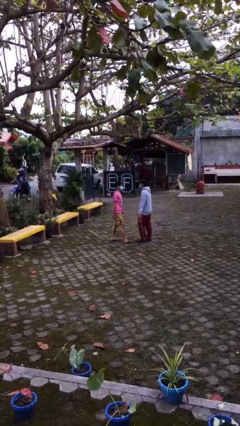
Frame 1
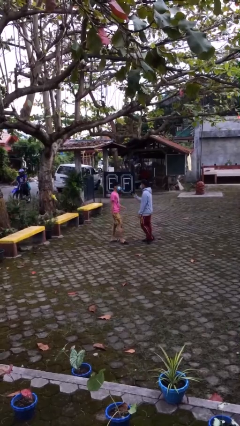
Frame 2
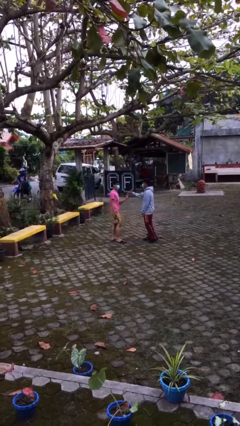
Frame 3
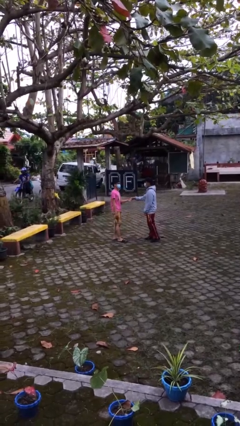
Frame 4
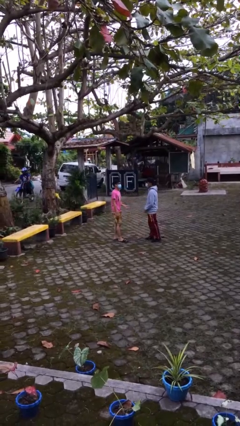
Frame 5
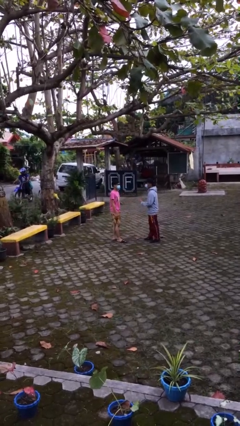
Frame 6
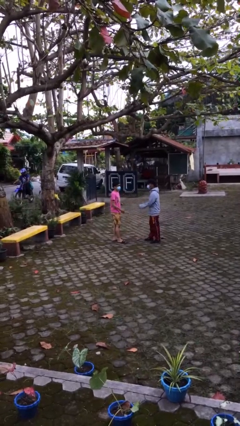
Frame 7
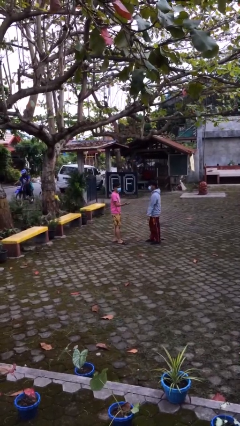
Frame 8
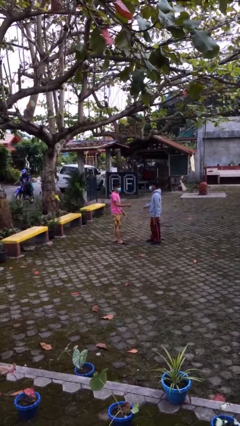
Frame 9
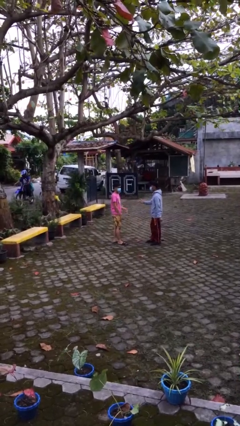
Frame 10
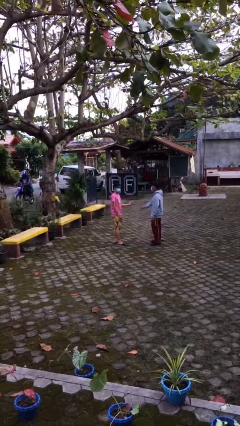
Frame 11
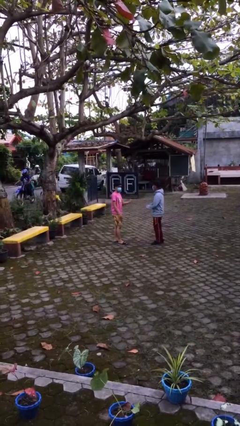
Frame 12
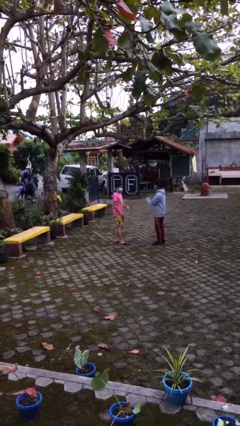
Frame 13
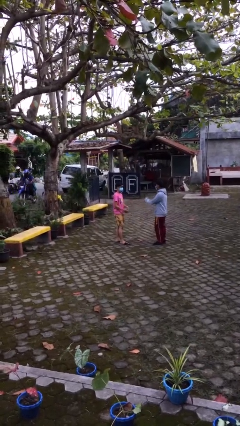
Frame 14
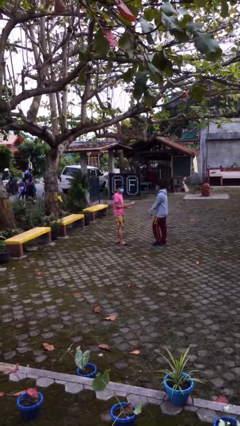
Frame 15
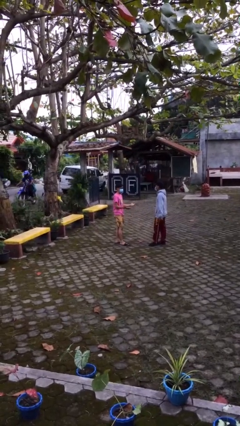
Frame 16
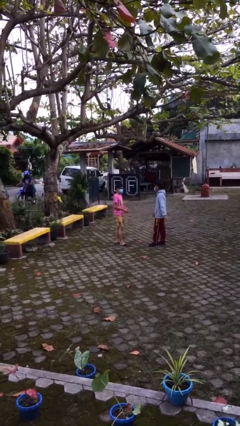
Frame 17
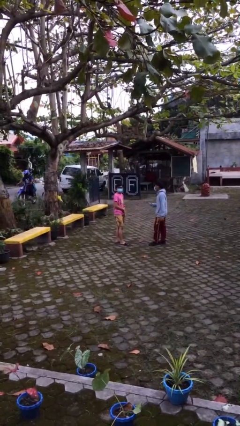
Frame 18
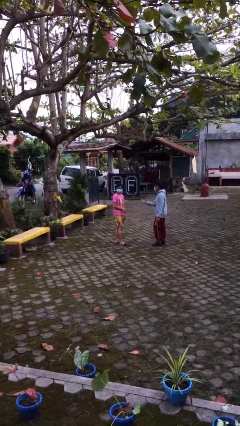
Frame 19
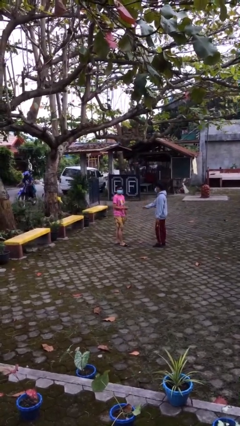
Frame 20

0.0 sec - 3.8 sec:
person talks to person

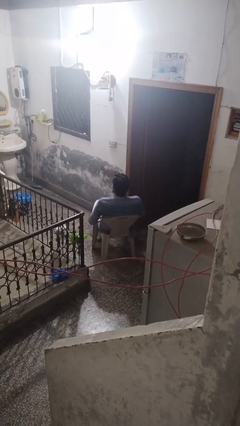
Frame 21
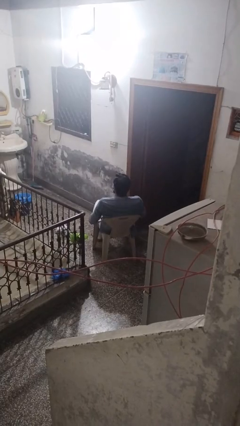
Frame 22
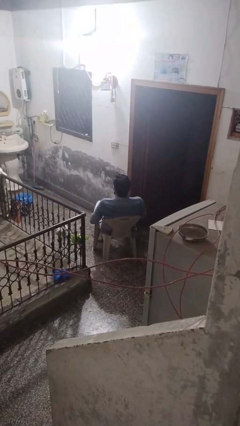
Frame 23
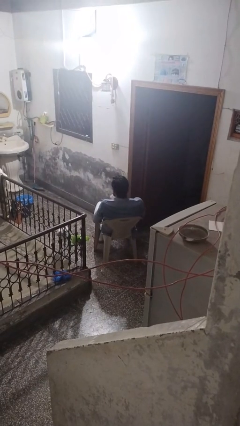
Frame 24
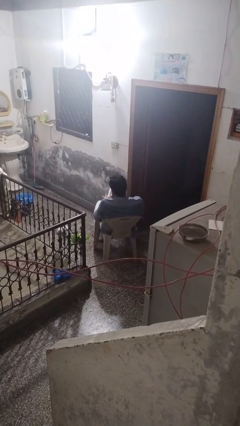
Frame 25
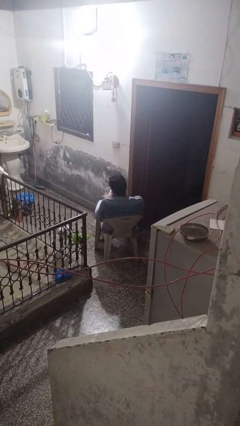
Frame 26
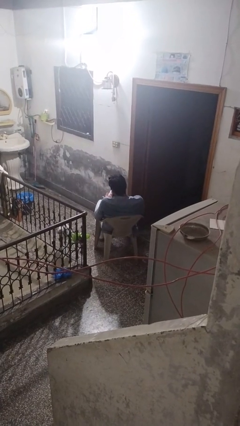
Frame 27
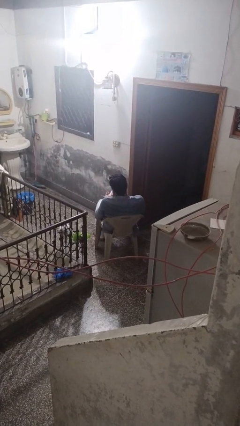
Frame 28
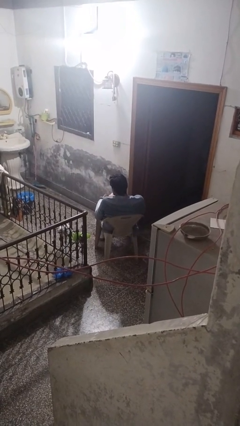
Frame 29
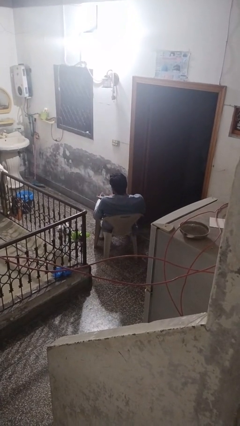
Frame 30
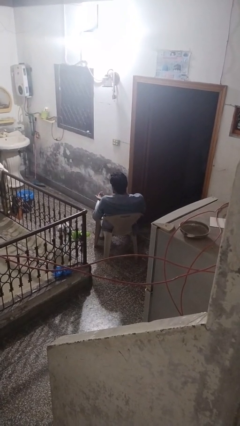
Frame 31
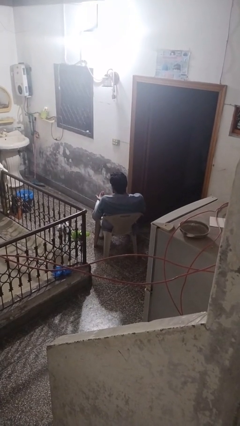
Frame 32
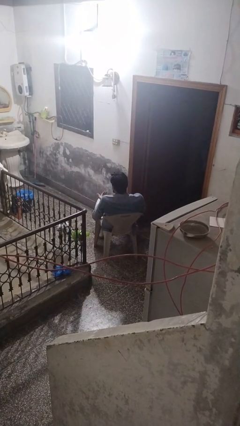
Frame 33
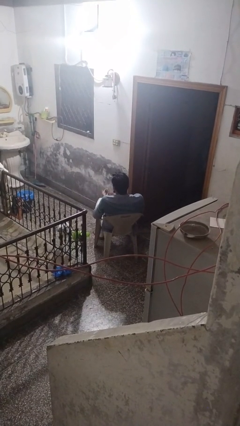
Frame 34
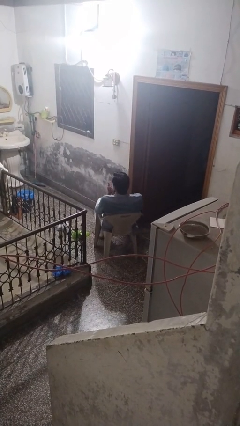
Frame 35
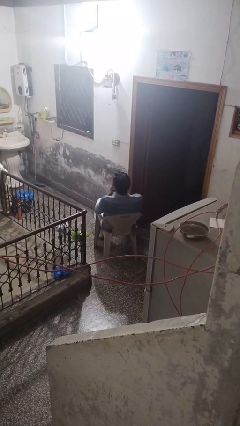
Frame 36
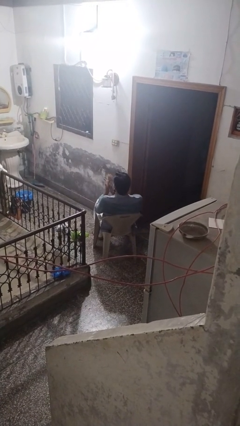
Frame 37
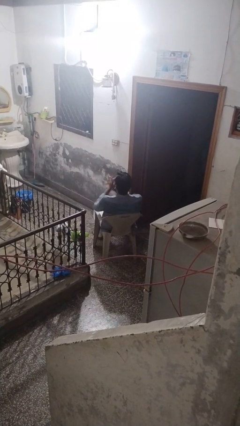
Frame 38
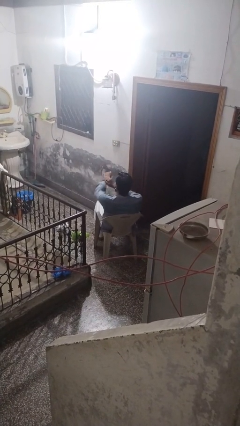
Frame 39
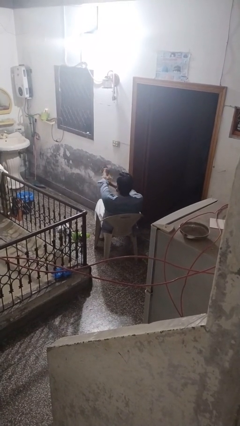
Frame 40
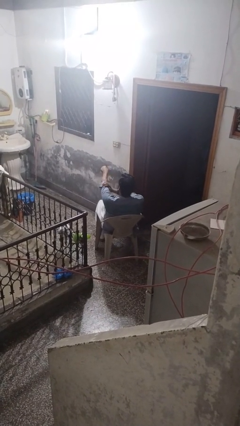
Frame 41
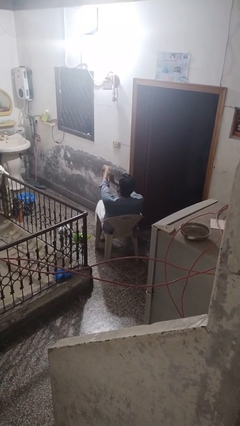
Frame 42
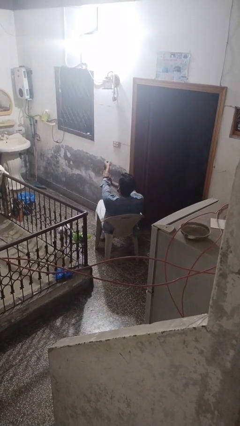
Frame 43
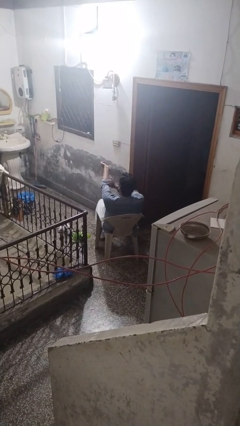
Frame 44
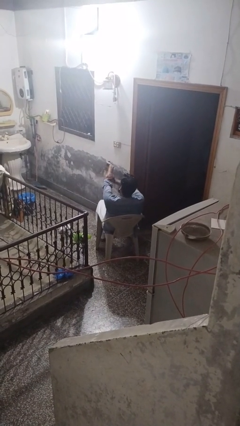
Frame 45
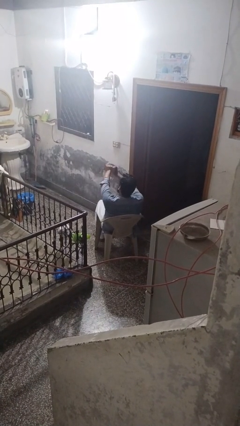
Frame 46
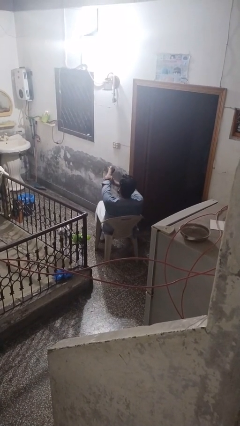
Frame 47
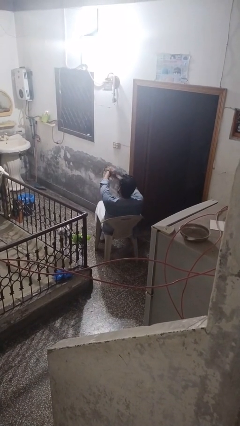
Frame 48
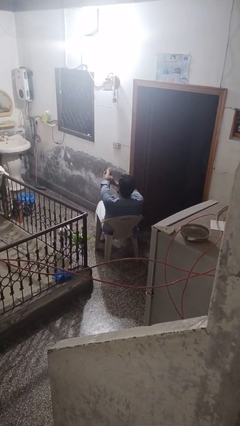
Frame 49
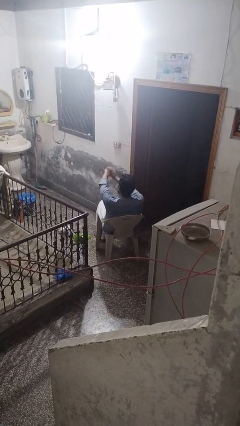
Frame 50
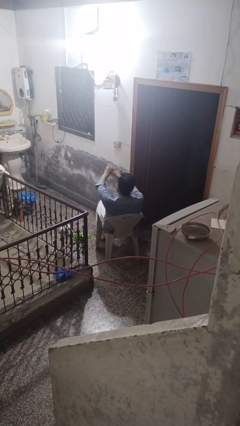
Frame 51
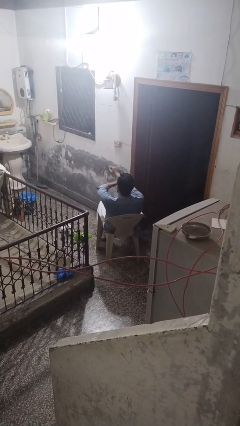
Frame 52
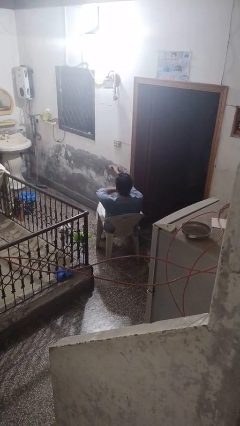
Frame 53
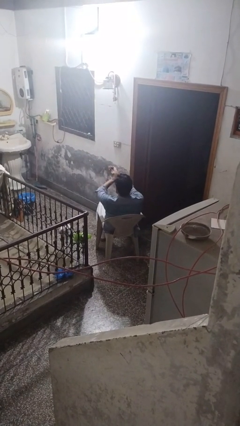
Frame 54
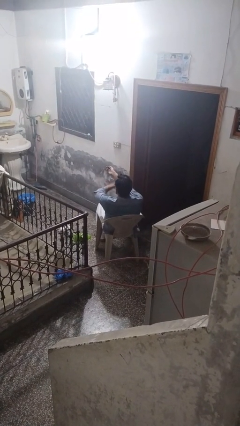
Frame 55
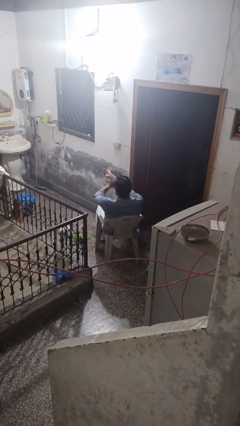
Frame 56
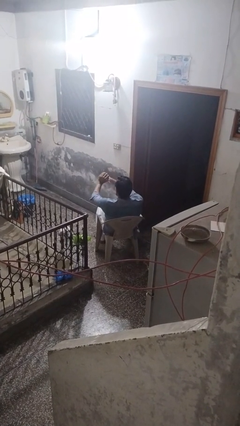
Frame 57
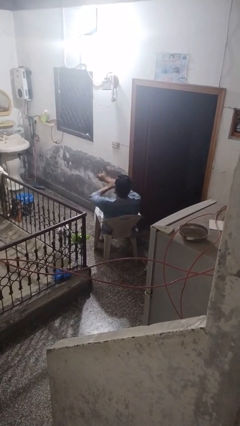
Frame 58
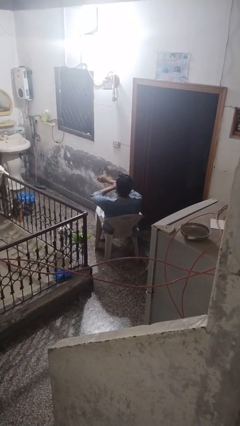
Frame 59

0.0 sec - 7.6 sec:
person applies sunscreen

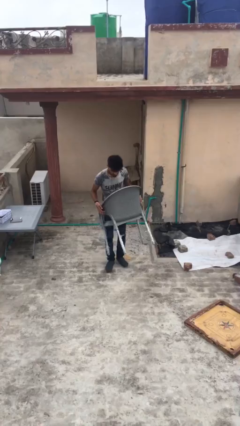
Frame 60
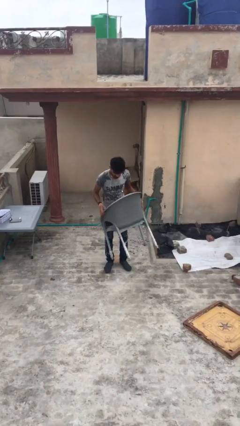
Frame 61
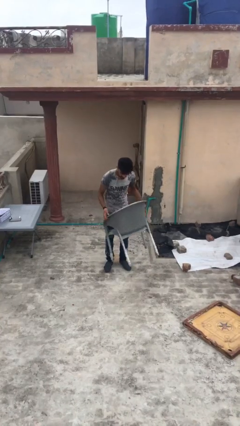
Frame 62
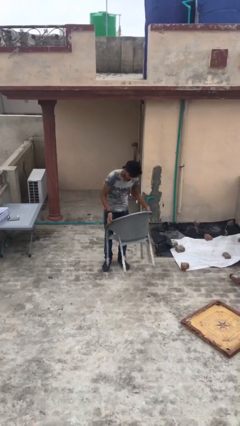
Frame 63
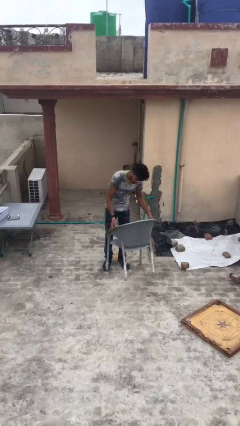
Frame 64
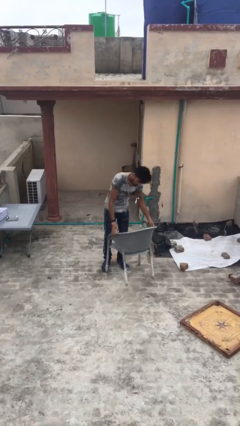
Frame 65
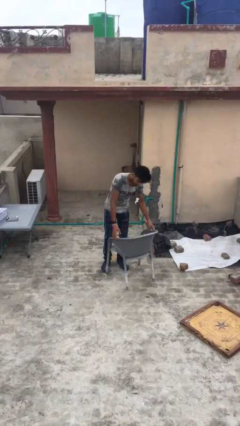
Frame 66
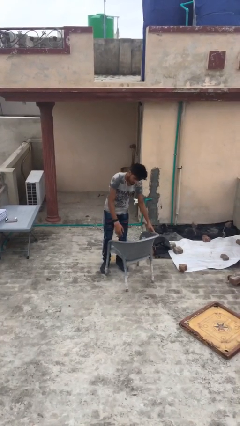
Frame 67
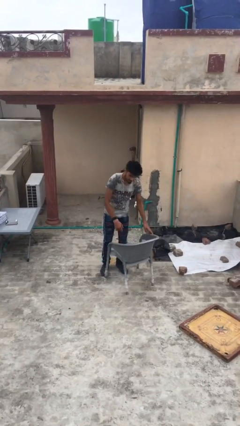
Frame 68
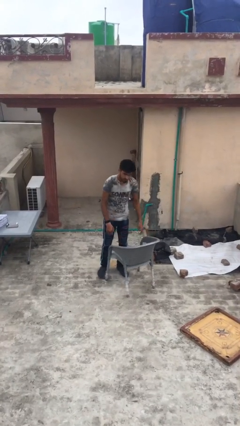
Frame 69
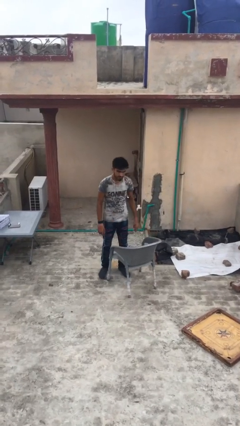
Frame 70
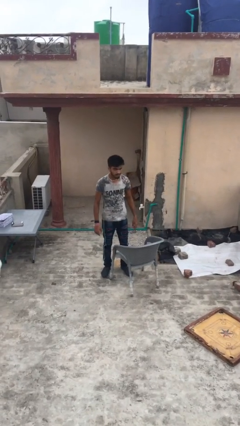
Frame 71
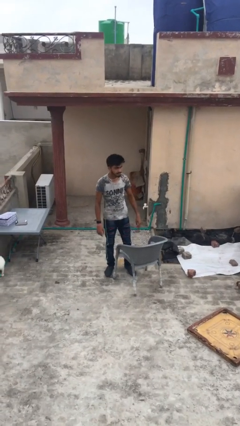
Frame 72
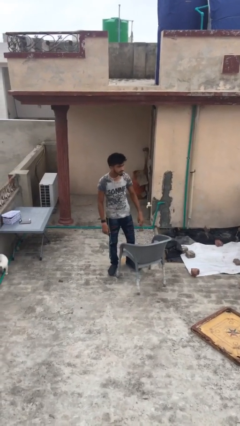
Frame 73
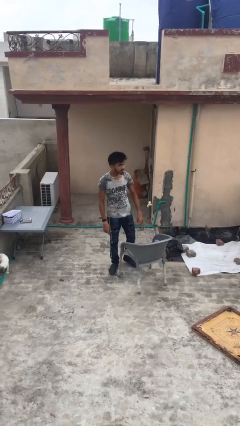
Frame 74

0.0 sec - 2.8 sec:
person puts down object on floor

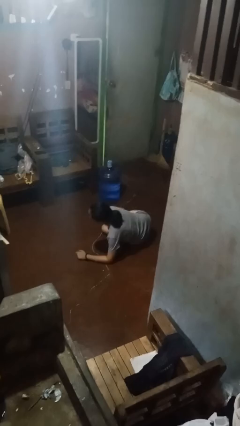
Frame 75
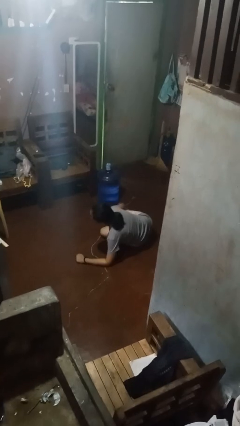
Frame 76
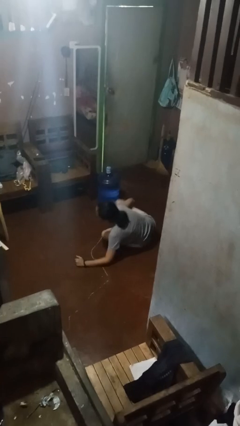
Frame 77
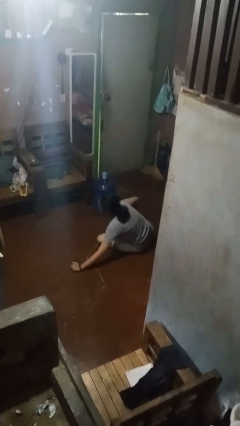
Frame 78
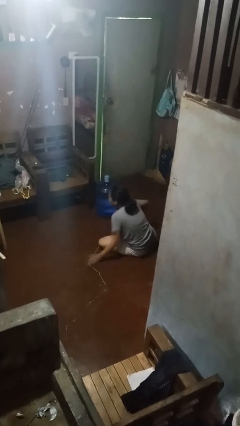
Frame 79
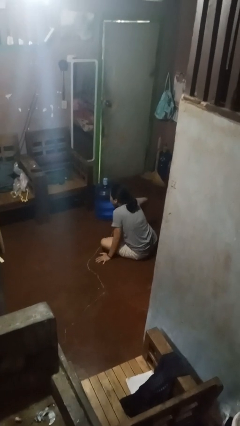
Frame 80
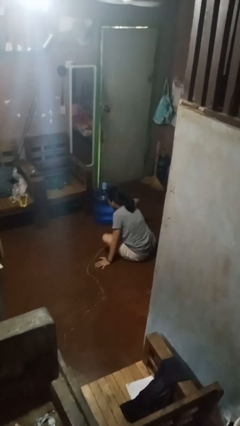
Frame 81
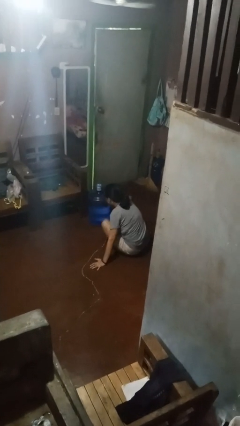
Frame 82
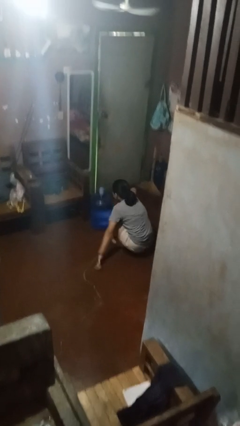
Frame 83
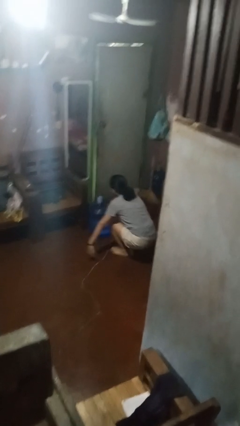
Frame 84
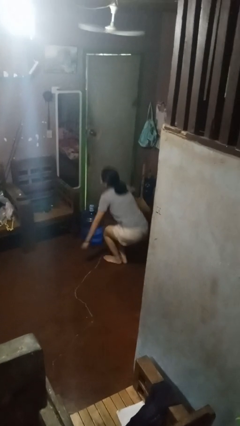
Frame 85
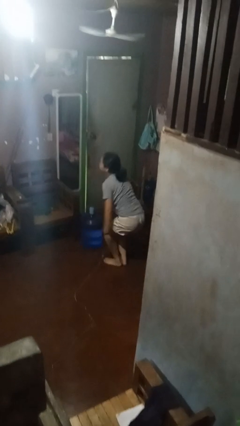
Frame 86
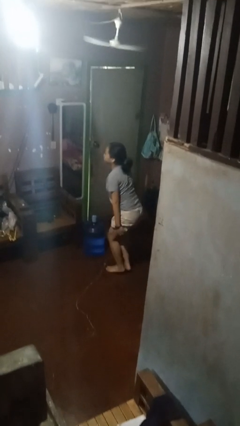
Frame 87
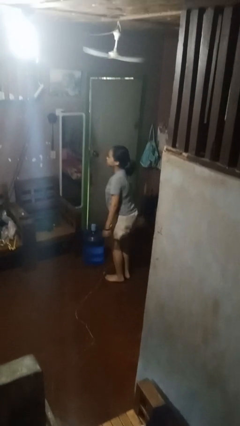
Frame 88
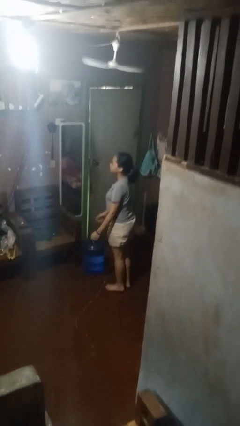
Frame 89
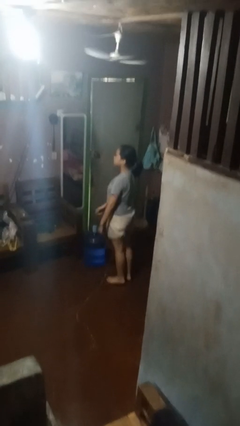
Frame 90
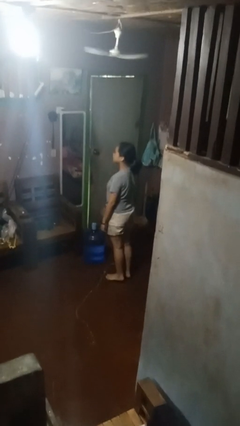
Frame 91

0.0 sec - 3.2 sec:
person stands up from floor

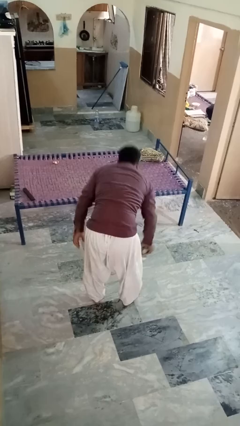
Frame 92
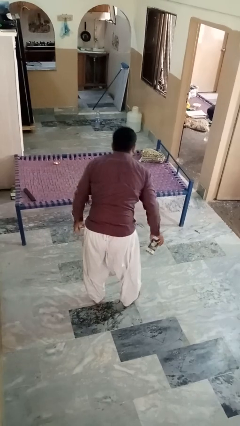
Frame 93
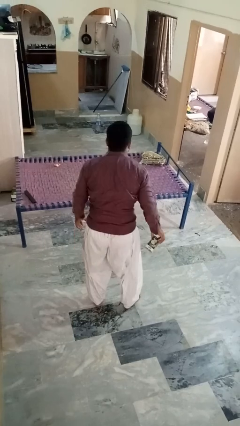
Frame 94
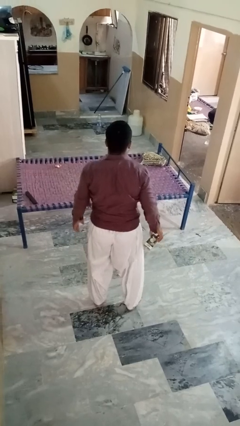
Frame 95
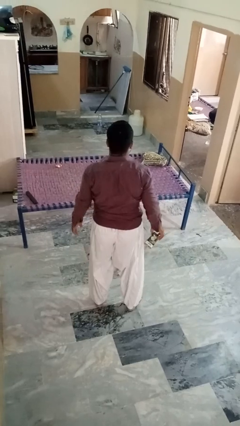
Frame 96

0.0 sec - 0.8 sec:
person picks up object from floor
